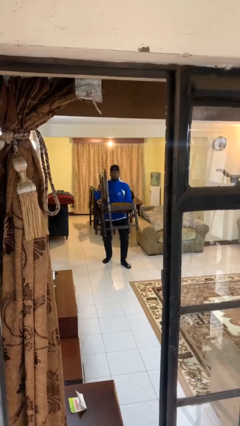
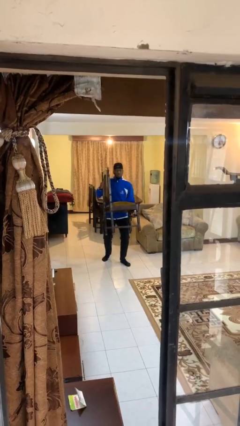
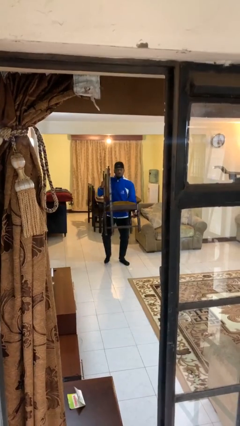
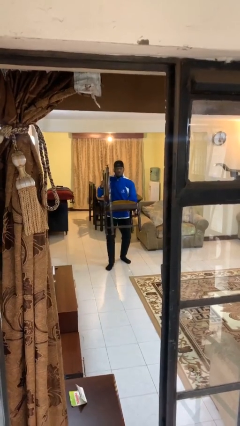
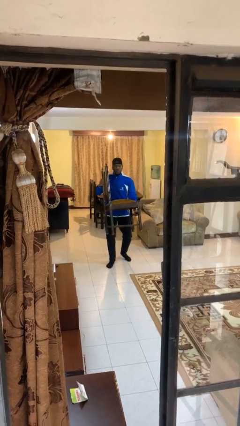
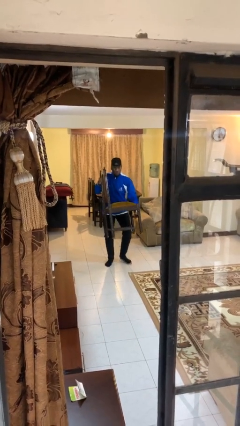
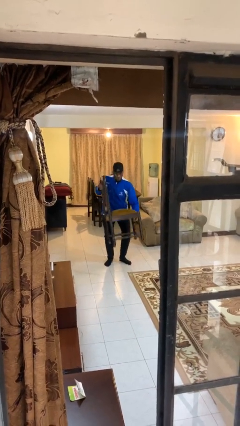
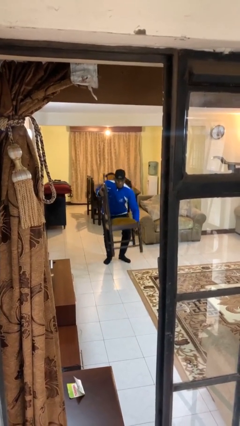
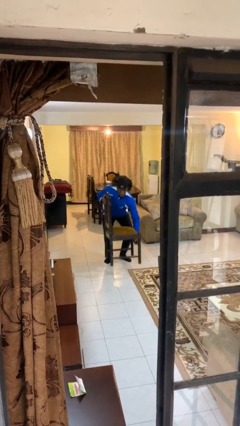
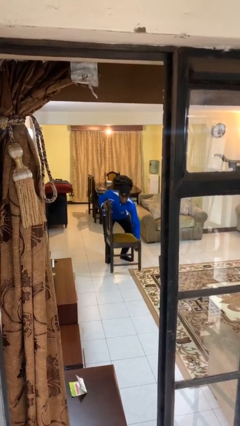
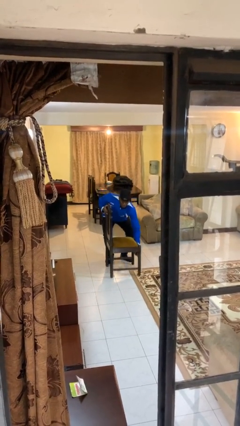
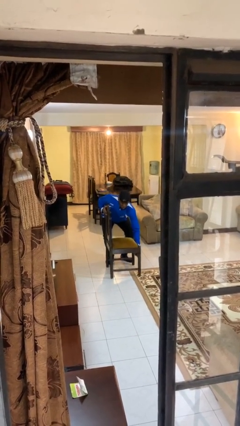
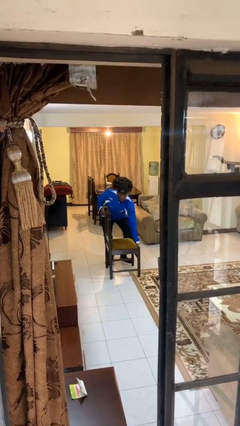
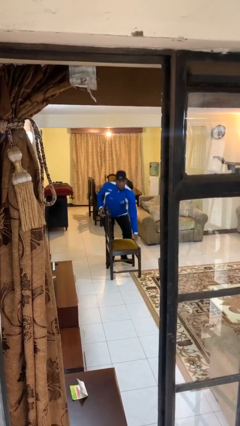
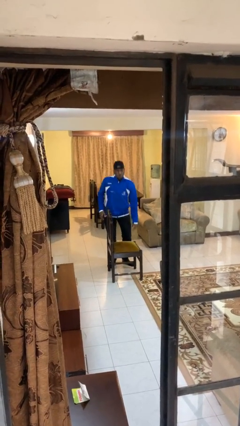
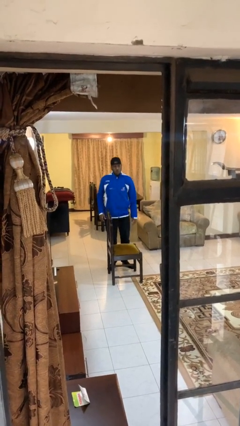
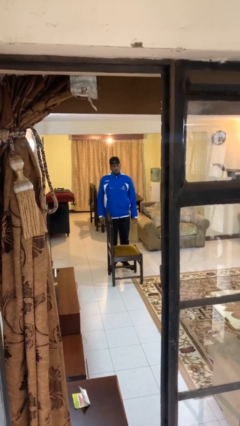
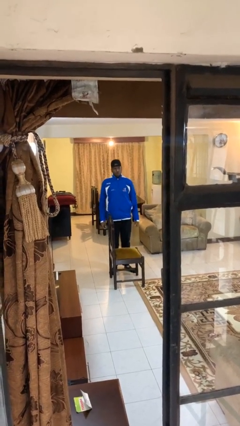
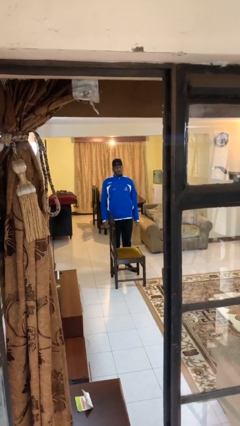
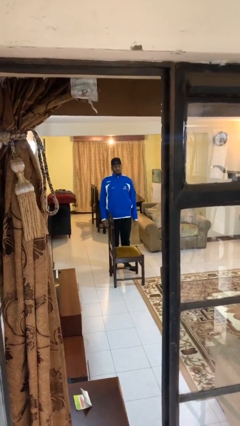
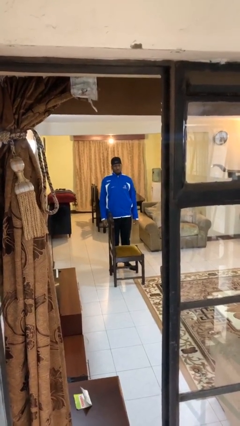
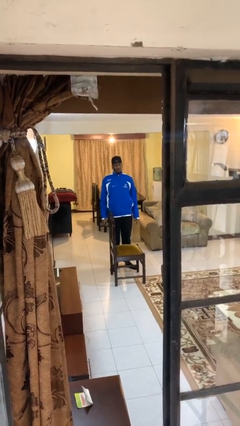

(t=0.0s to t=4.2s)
person puts down object on floor

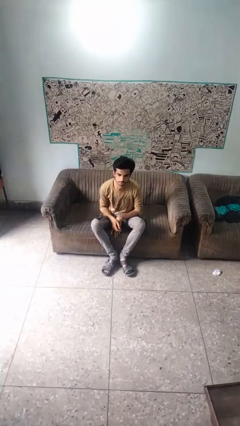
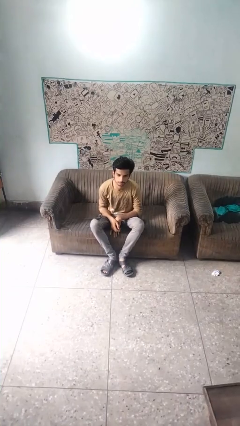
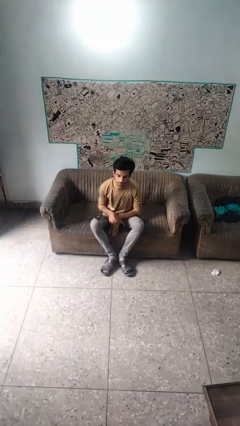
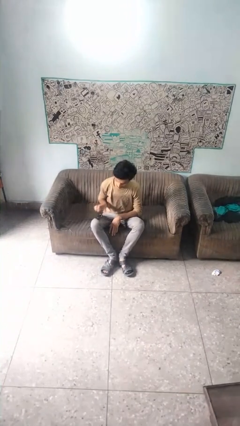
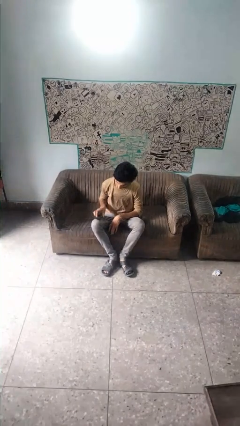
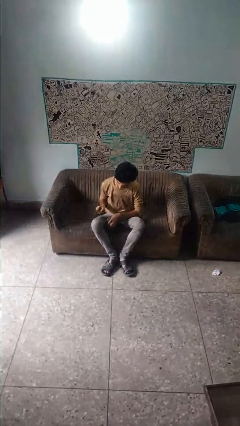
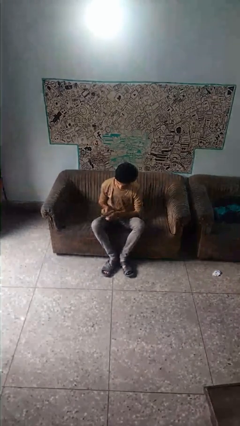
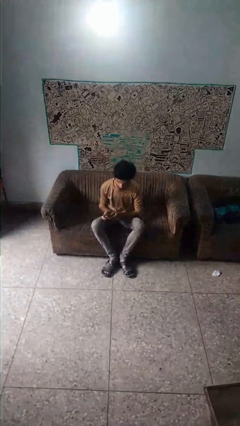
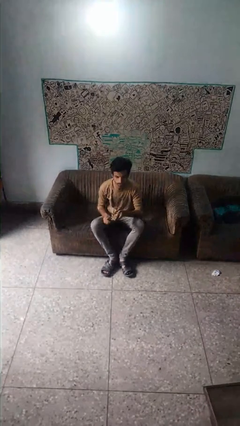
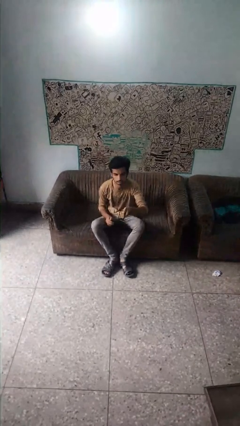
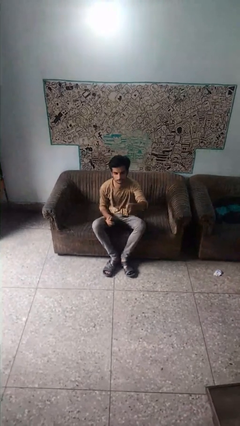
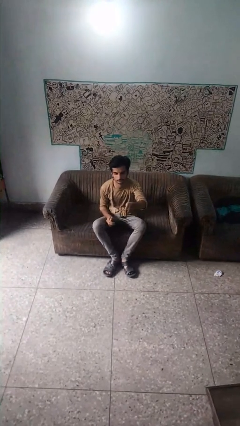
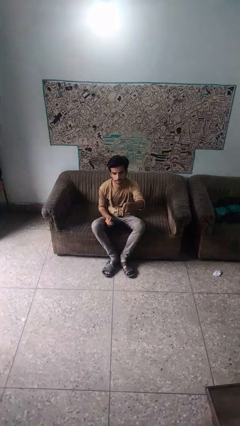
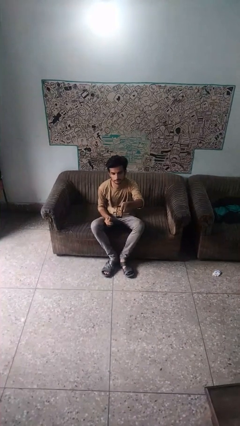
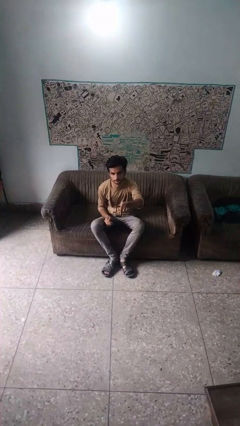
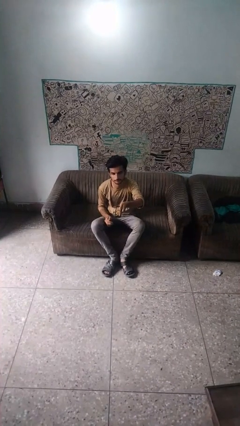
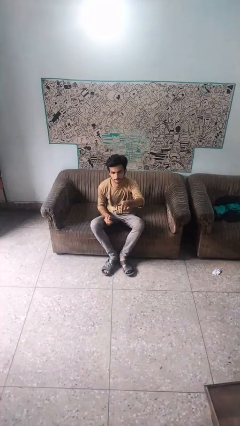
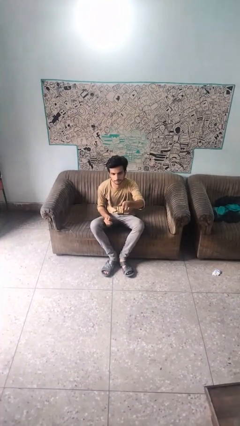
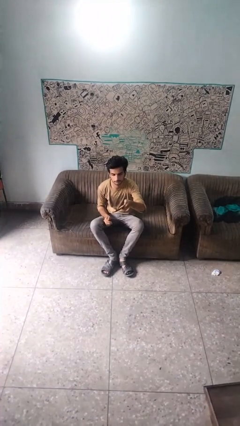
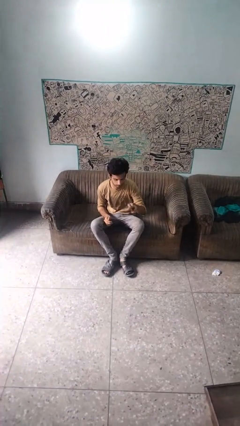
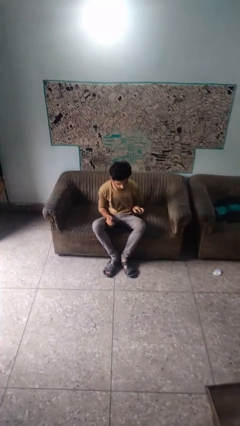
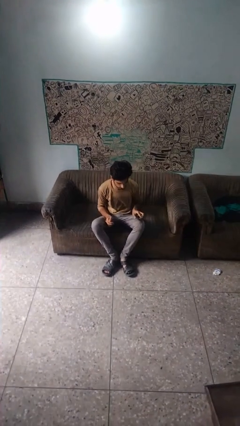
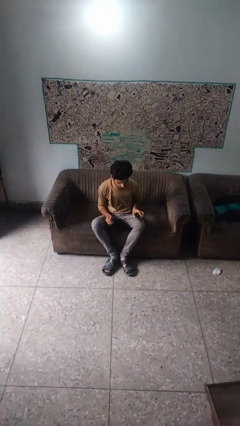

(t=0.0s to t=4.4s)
person uses television remote

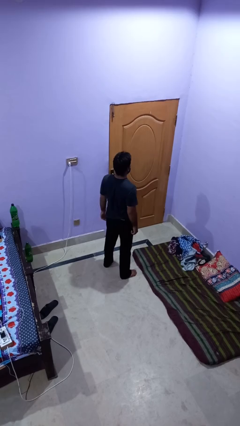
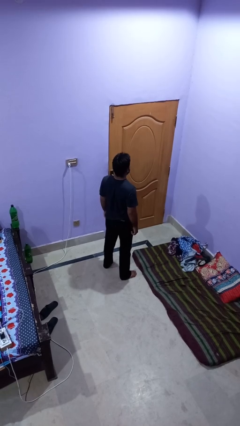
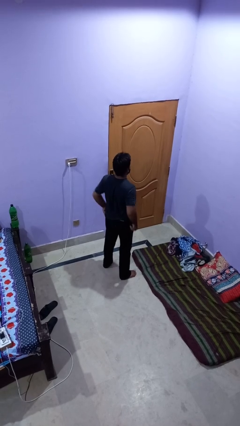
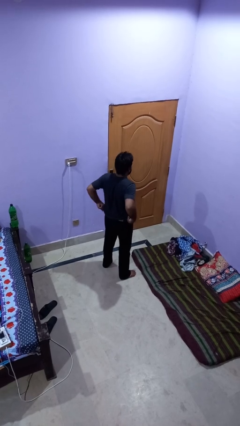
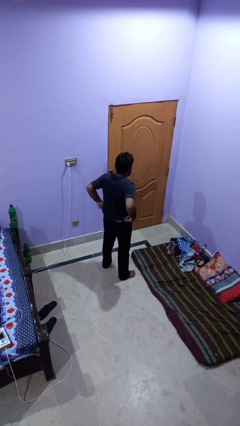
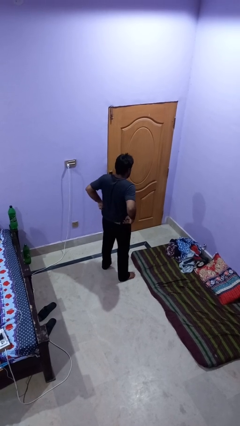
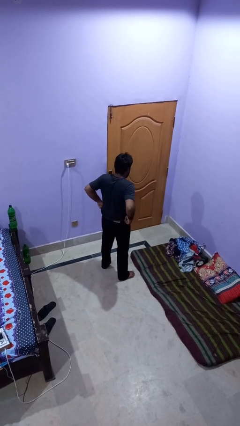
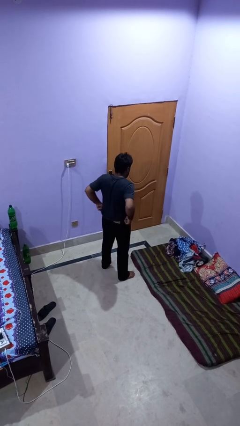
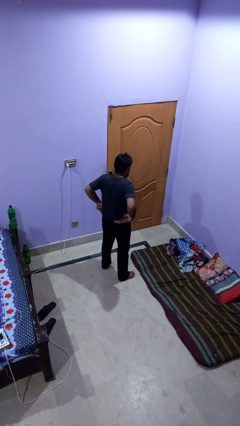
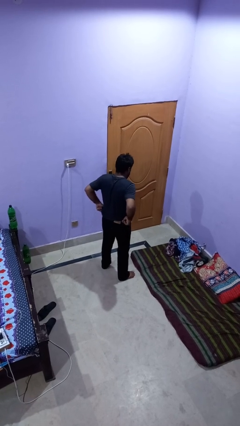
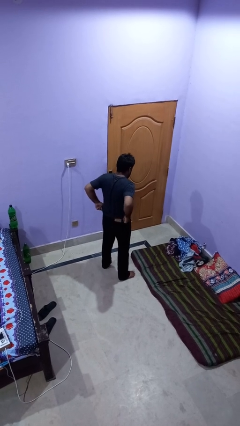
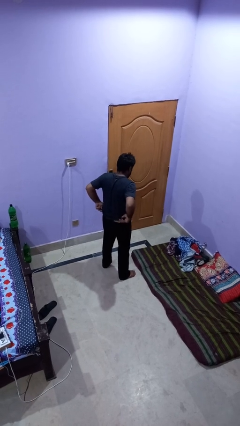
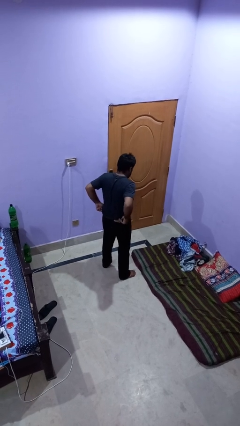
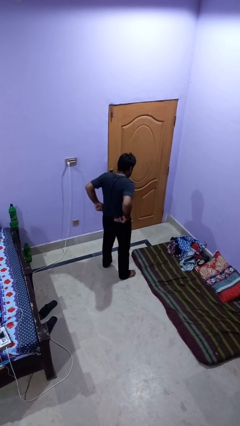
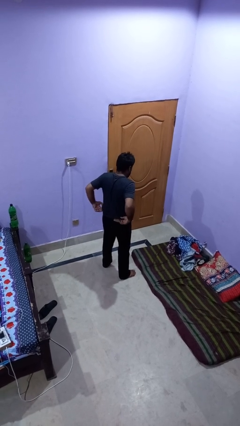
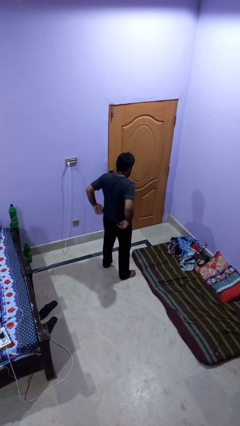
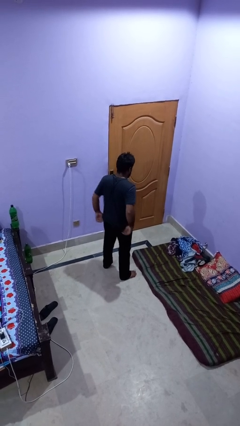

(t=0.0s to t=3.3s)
person hikes up pants

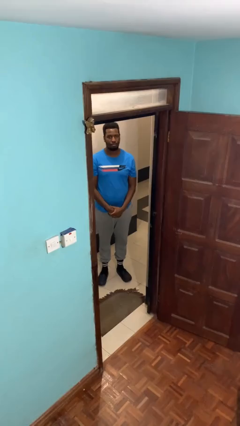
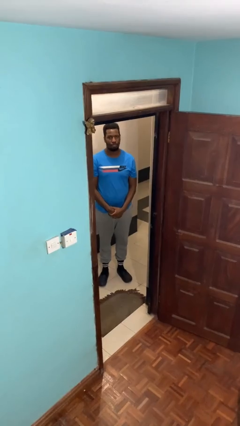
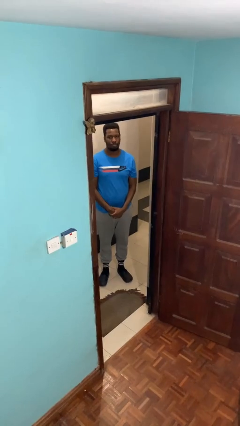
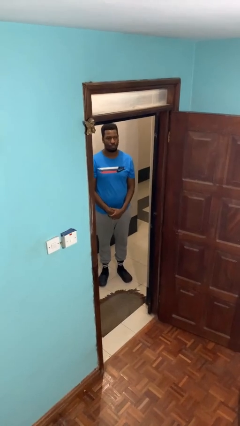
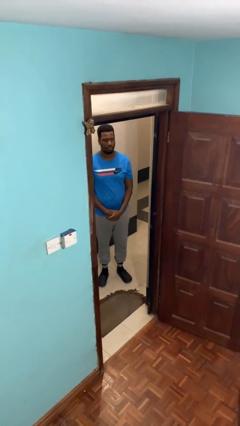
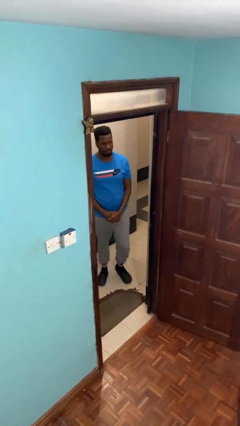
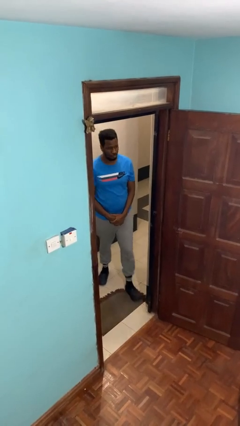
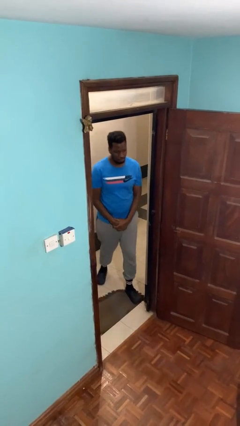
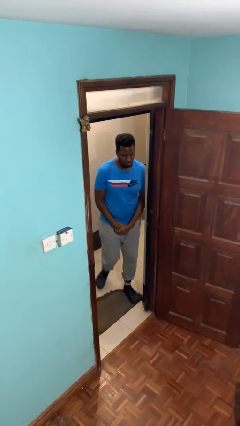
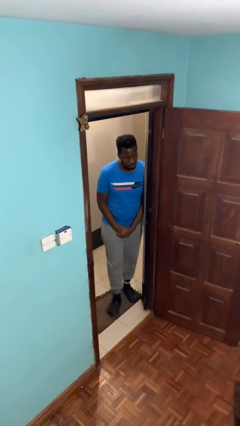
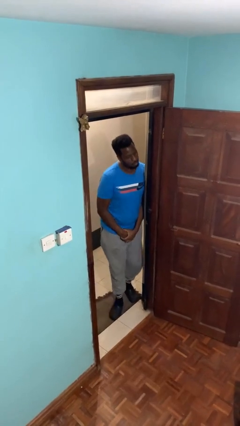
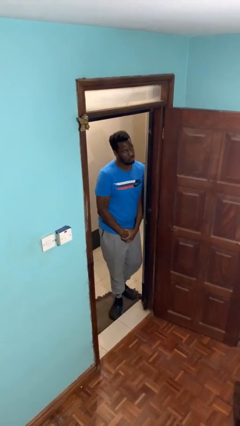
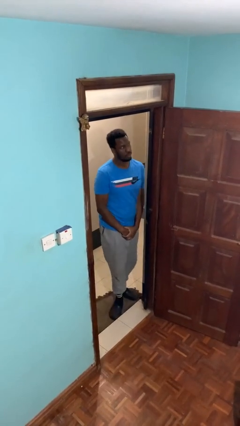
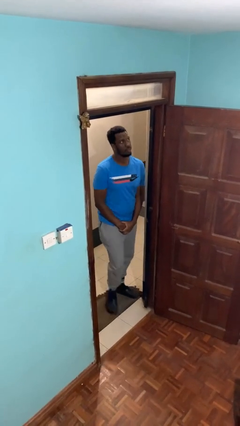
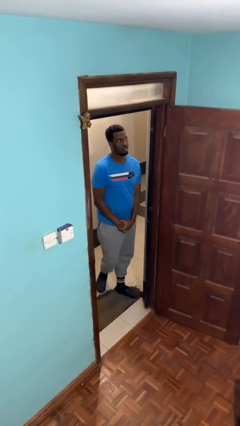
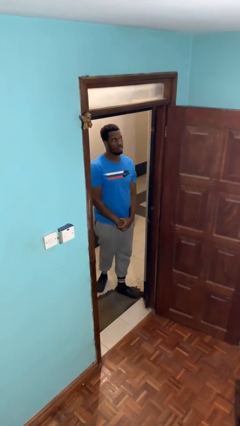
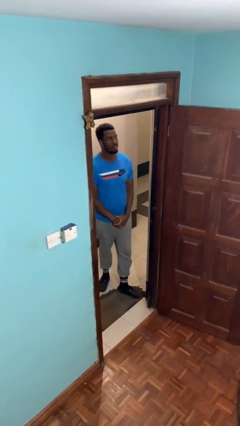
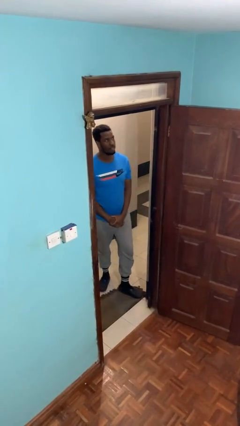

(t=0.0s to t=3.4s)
person bumps into wall

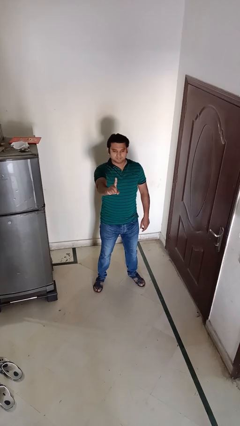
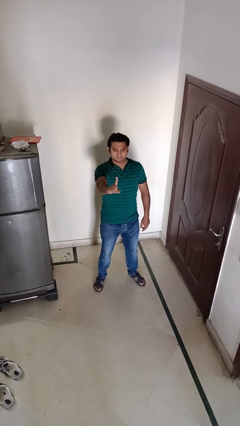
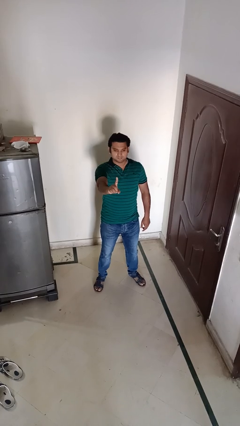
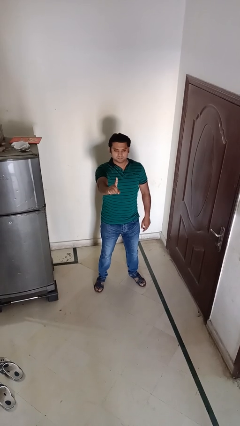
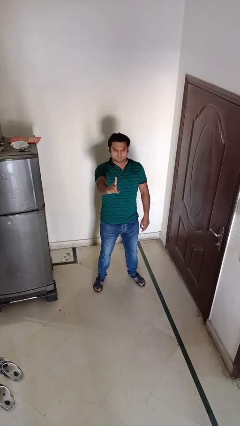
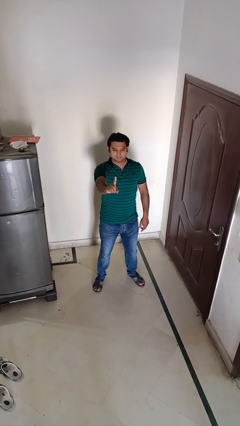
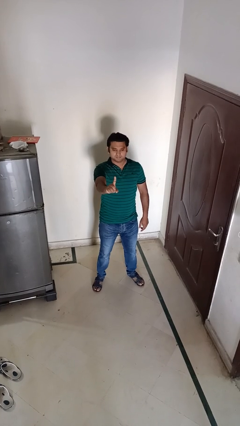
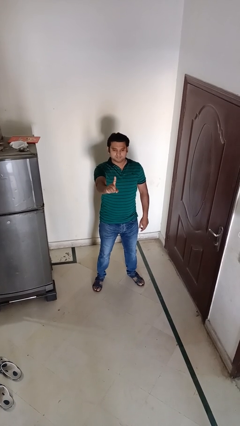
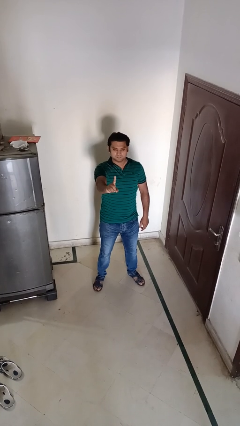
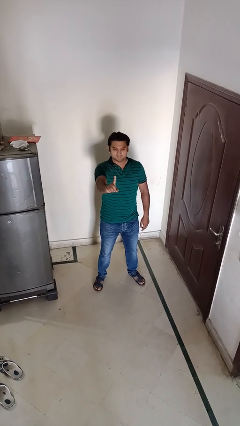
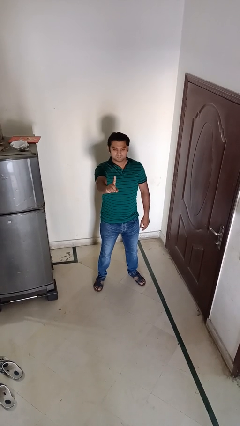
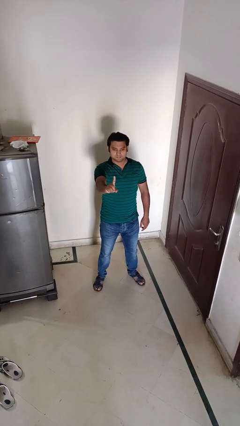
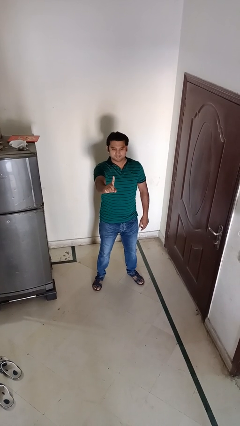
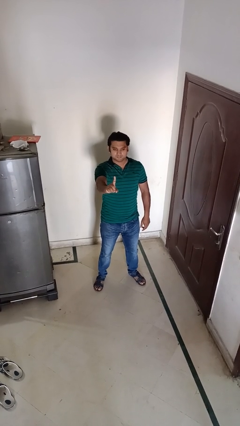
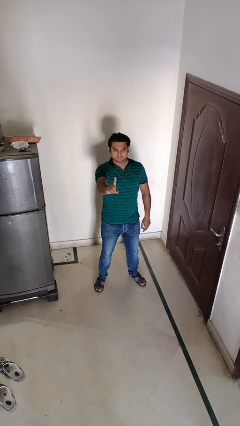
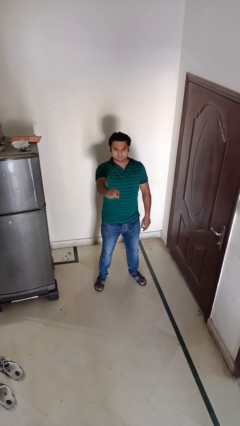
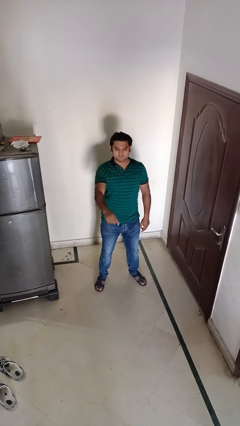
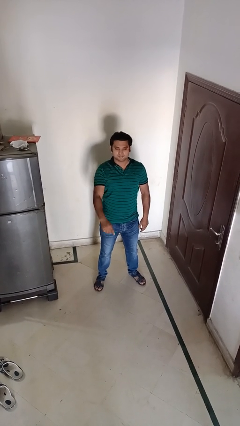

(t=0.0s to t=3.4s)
person gestures number one
